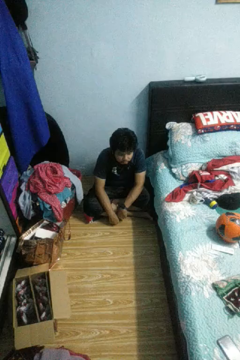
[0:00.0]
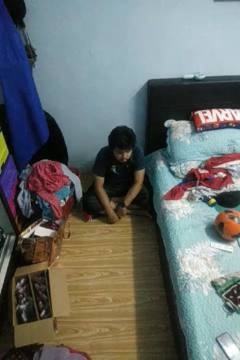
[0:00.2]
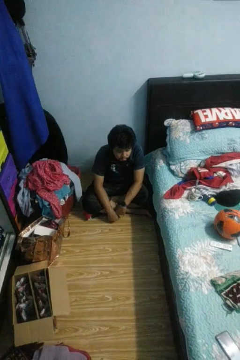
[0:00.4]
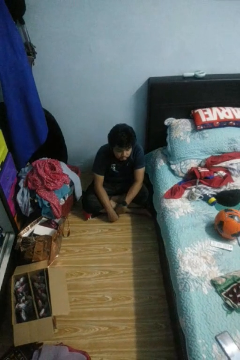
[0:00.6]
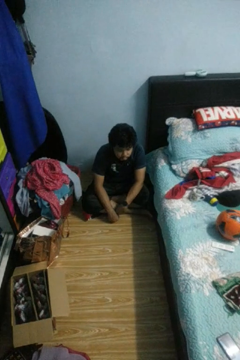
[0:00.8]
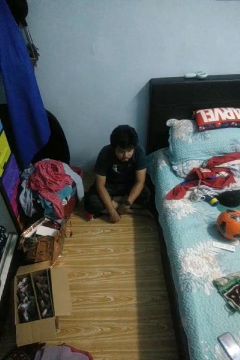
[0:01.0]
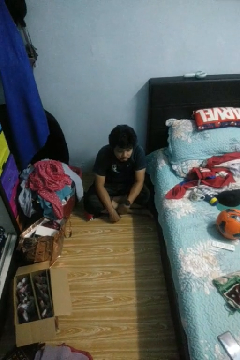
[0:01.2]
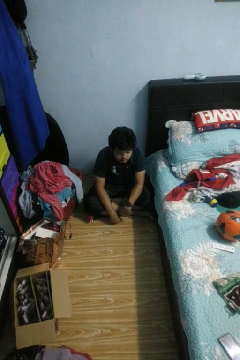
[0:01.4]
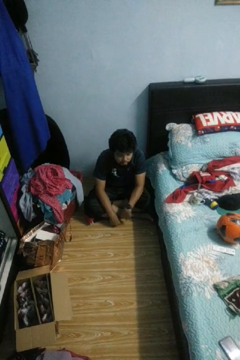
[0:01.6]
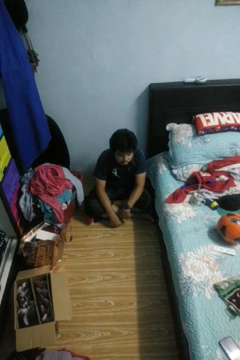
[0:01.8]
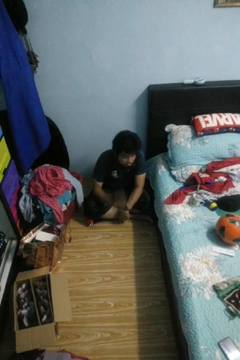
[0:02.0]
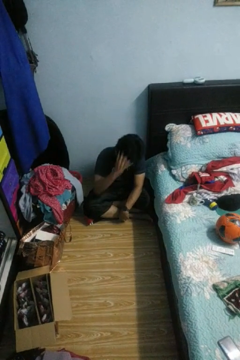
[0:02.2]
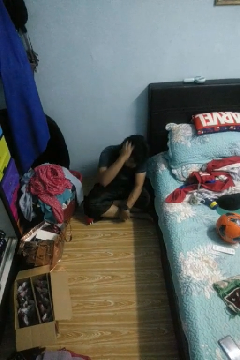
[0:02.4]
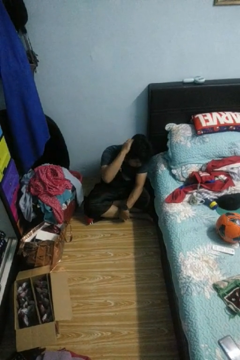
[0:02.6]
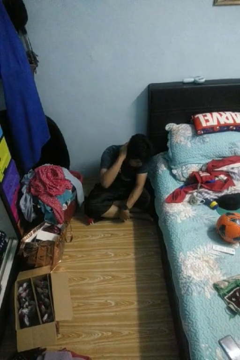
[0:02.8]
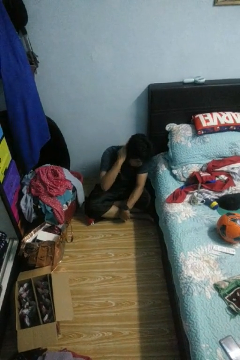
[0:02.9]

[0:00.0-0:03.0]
person strokes hair

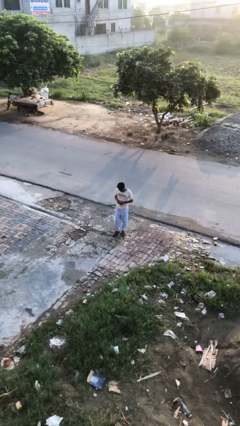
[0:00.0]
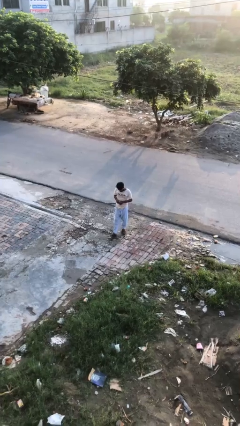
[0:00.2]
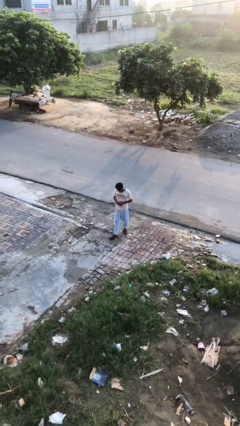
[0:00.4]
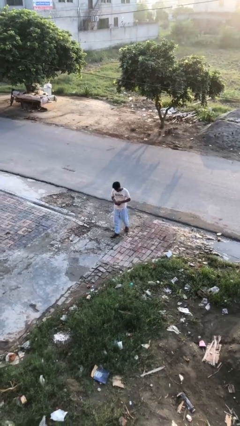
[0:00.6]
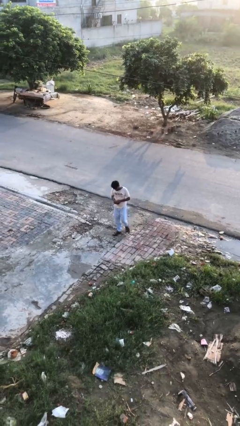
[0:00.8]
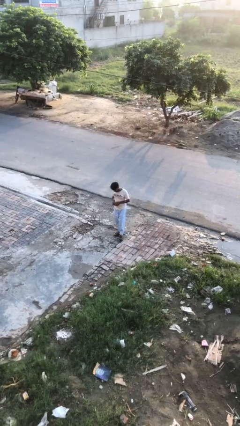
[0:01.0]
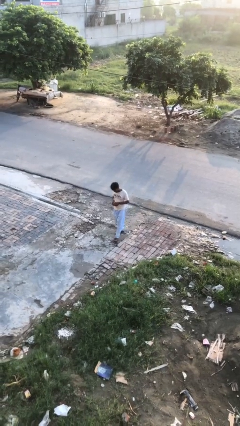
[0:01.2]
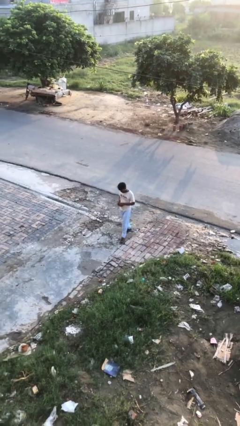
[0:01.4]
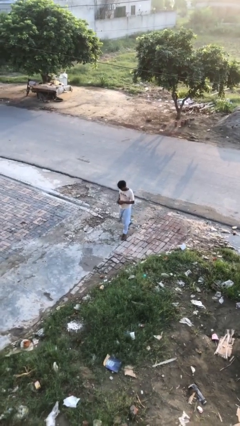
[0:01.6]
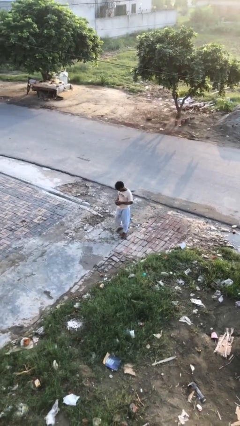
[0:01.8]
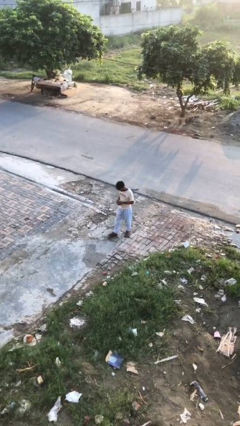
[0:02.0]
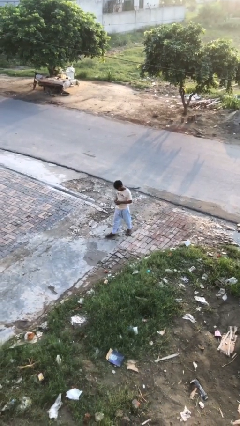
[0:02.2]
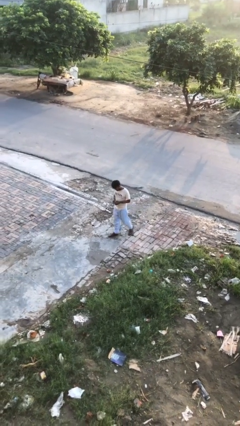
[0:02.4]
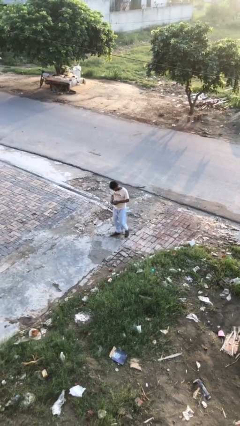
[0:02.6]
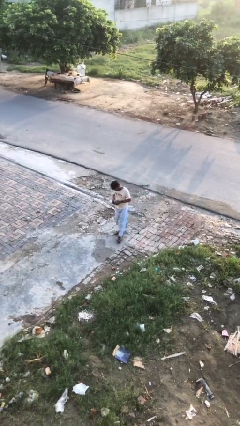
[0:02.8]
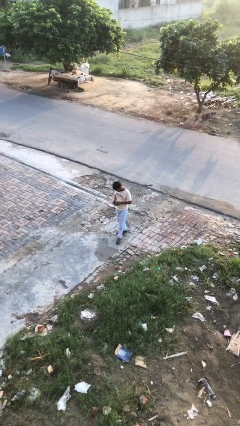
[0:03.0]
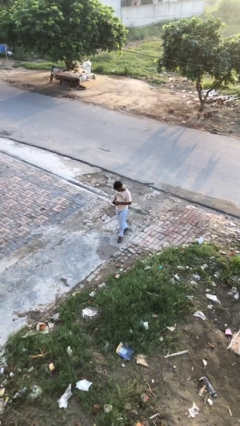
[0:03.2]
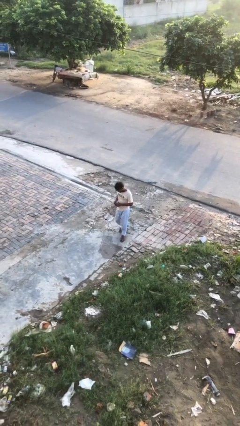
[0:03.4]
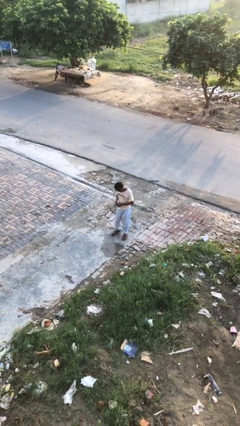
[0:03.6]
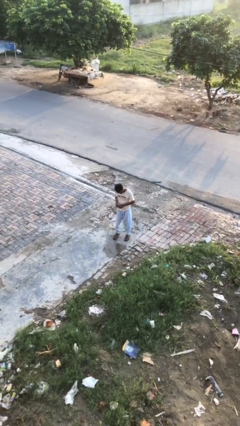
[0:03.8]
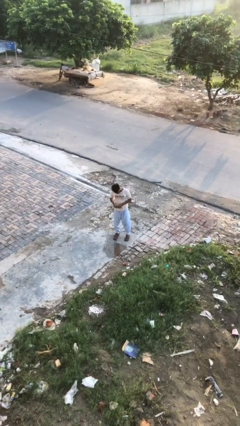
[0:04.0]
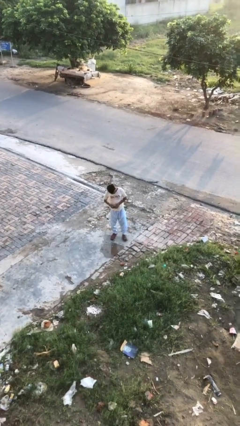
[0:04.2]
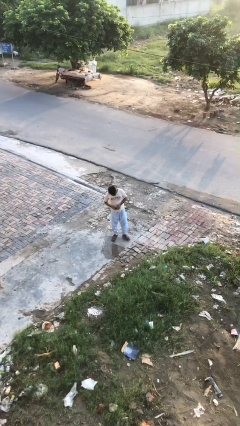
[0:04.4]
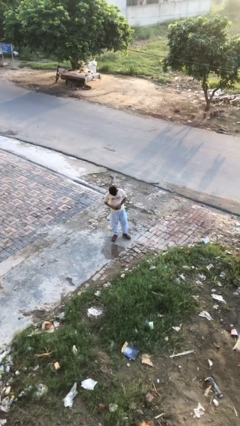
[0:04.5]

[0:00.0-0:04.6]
person texts on phone

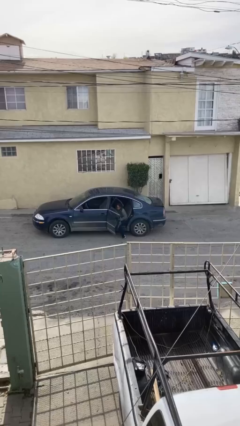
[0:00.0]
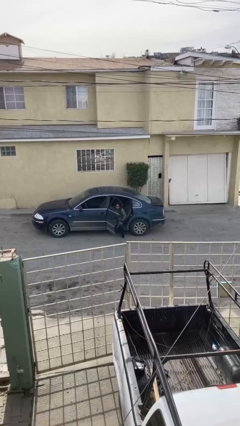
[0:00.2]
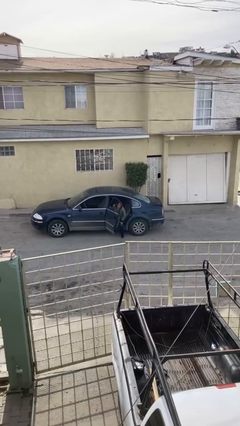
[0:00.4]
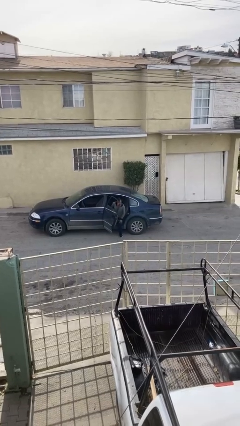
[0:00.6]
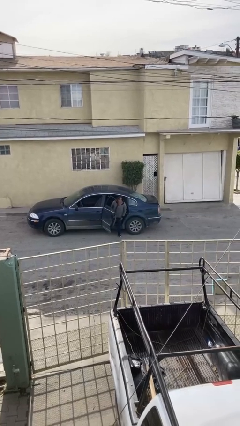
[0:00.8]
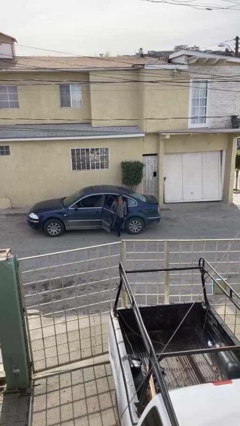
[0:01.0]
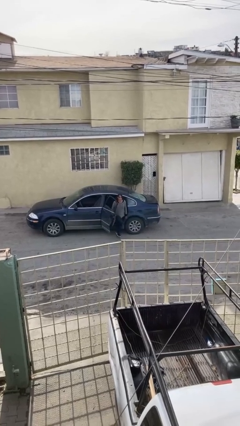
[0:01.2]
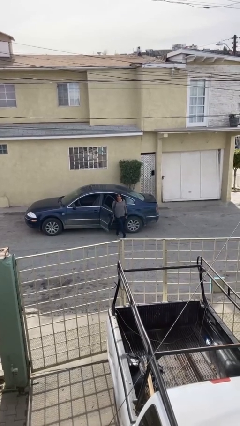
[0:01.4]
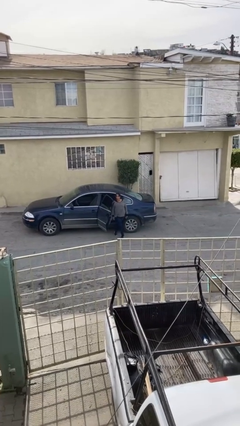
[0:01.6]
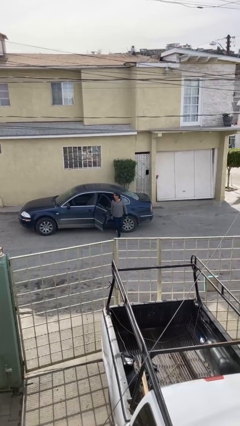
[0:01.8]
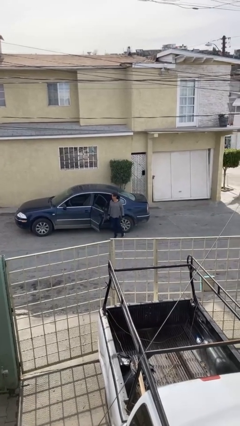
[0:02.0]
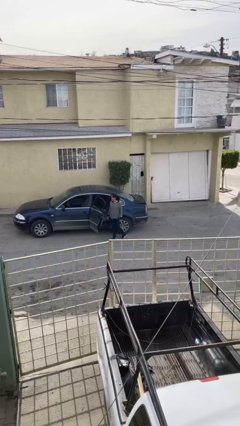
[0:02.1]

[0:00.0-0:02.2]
person exits car

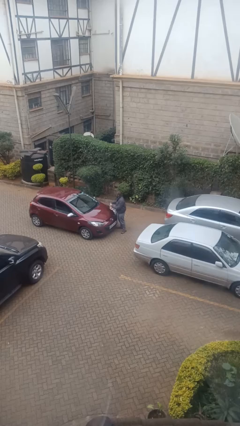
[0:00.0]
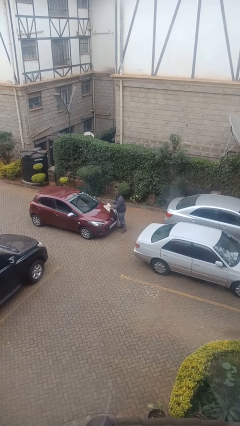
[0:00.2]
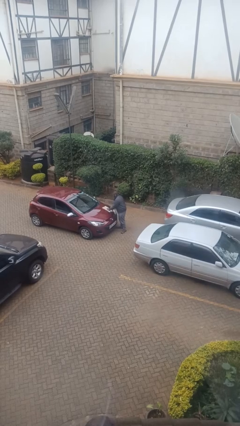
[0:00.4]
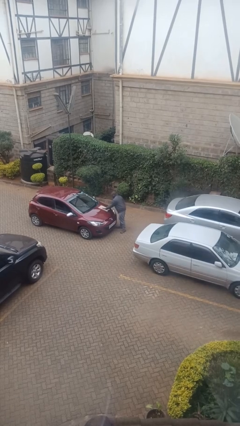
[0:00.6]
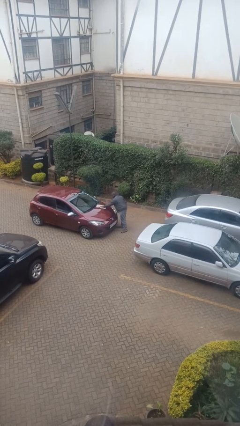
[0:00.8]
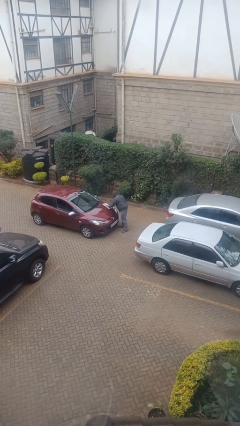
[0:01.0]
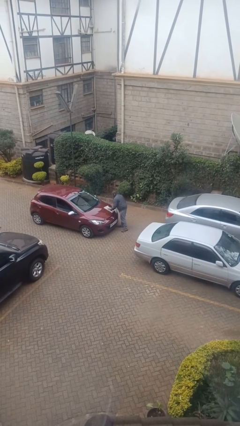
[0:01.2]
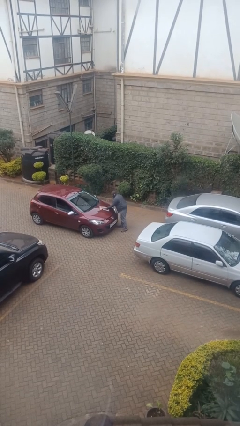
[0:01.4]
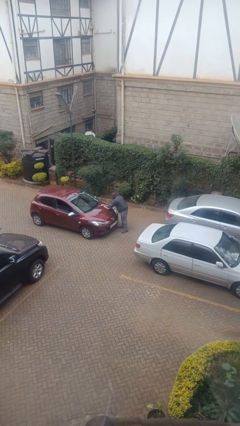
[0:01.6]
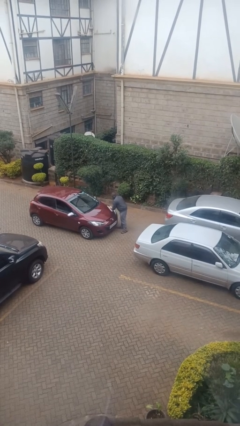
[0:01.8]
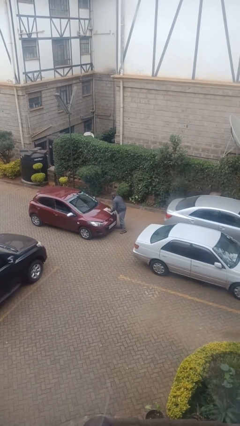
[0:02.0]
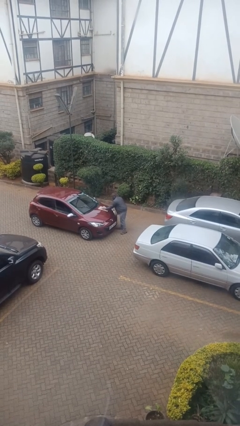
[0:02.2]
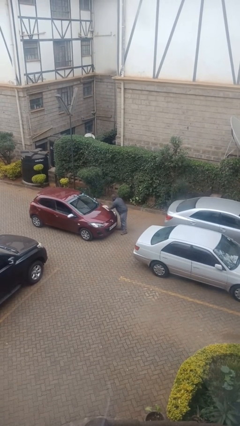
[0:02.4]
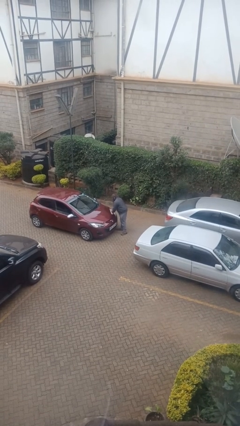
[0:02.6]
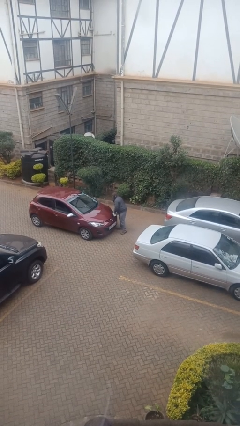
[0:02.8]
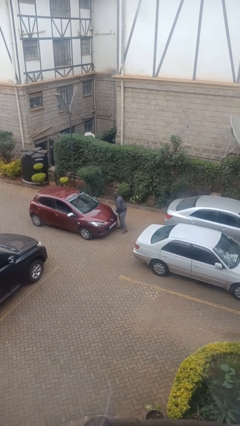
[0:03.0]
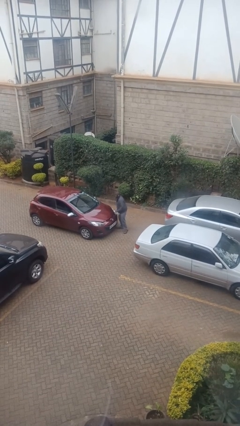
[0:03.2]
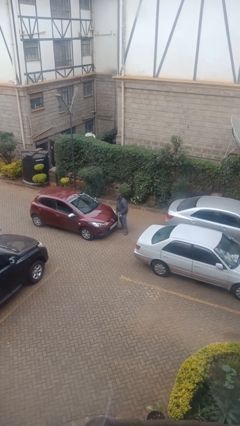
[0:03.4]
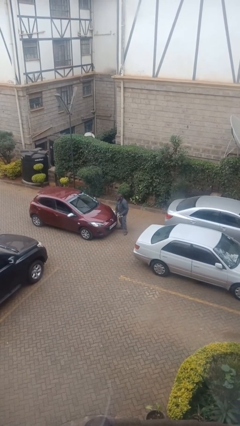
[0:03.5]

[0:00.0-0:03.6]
person polishes car with rag

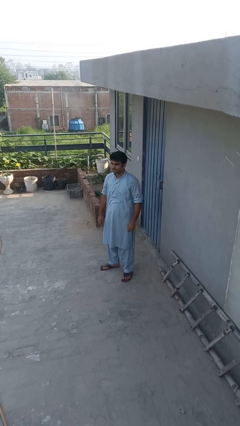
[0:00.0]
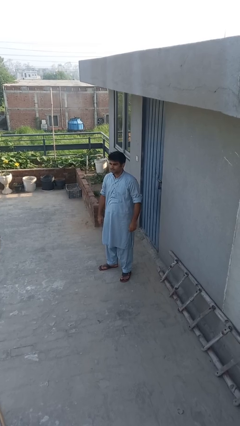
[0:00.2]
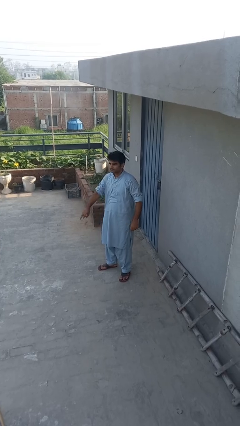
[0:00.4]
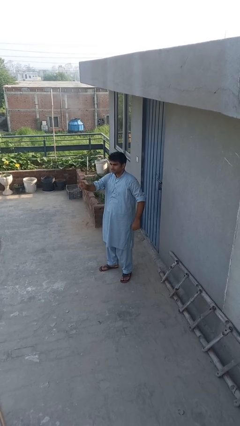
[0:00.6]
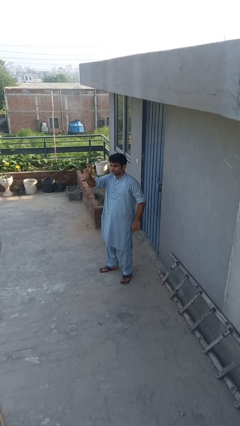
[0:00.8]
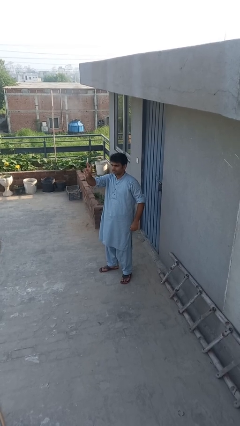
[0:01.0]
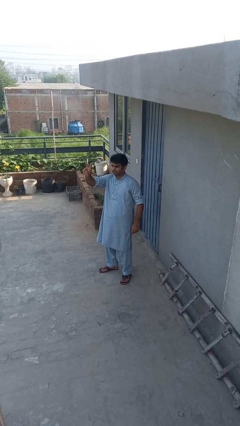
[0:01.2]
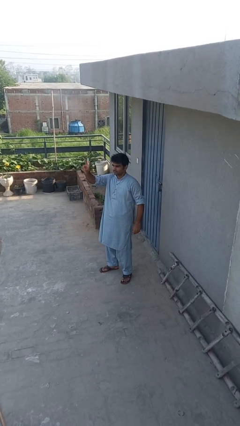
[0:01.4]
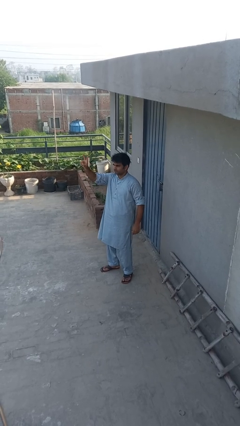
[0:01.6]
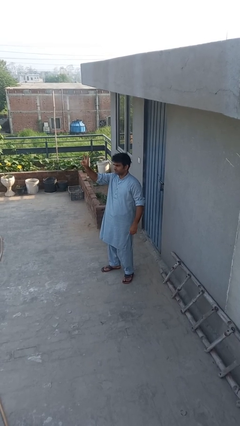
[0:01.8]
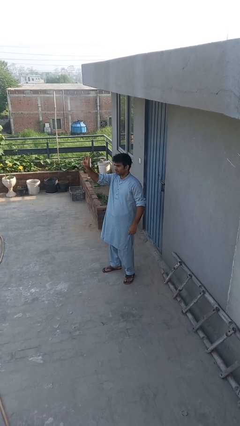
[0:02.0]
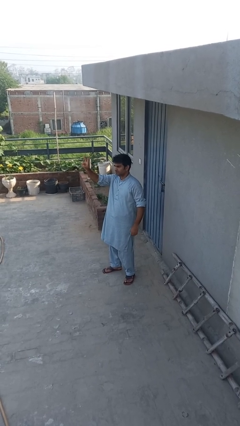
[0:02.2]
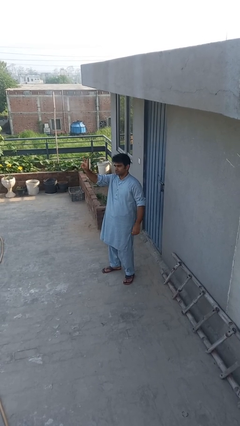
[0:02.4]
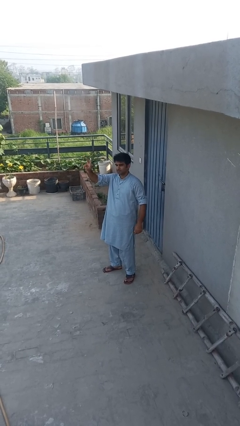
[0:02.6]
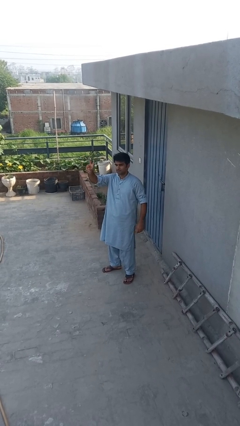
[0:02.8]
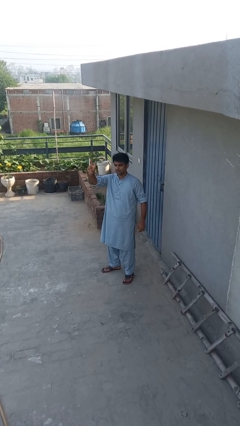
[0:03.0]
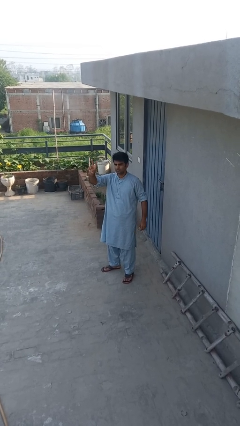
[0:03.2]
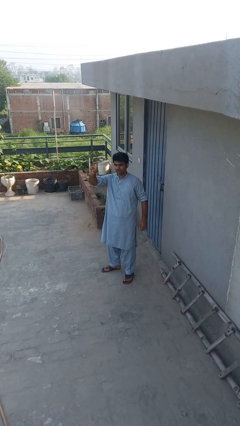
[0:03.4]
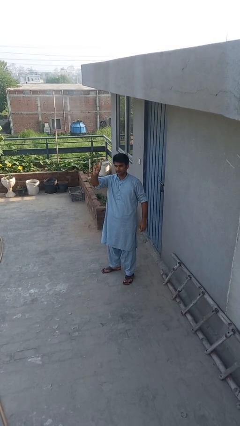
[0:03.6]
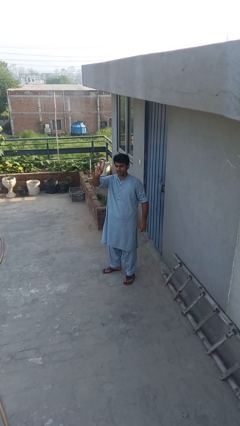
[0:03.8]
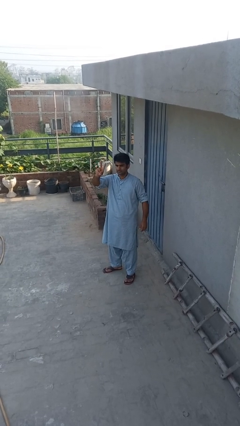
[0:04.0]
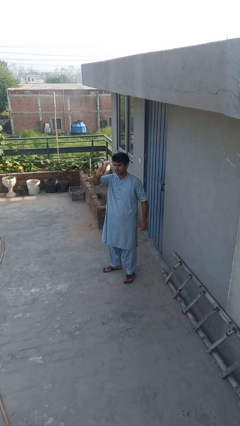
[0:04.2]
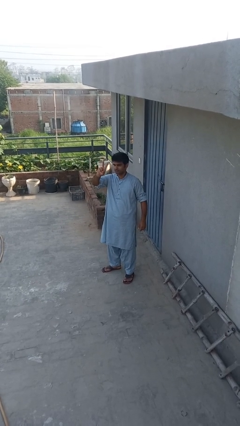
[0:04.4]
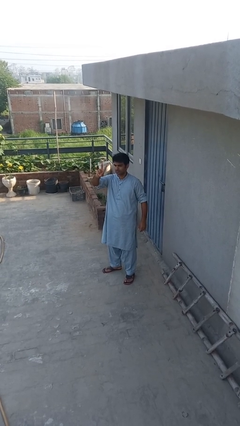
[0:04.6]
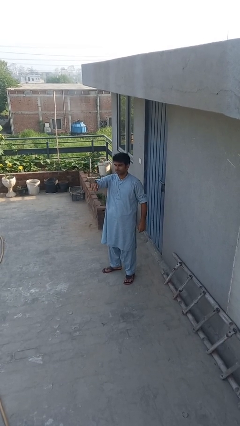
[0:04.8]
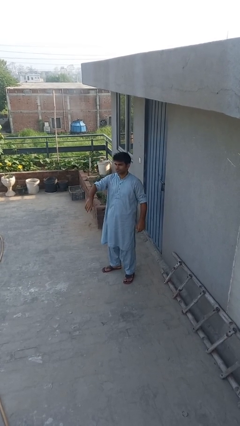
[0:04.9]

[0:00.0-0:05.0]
person gestures peace
